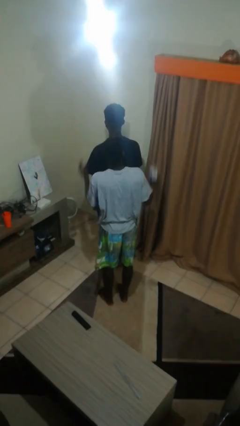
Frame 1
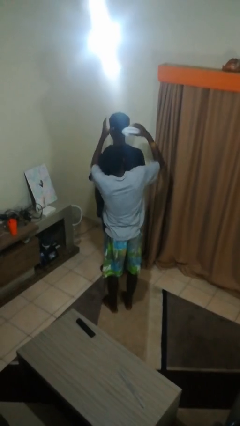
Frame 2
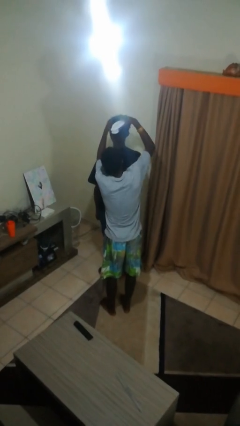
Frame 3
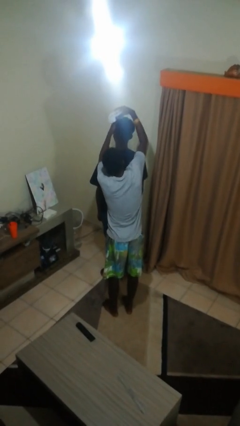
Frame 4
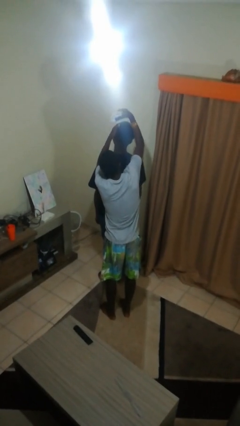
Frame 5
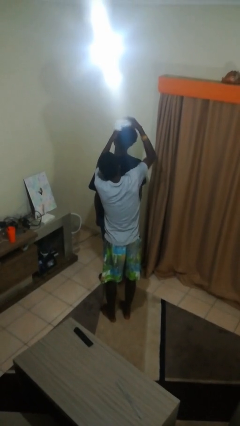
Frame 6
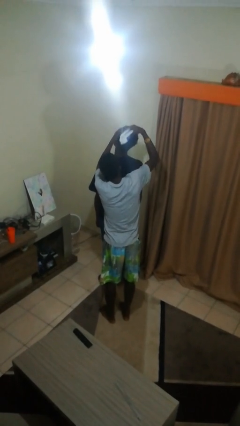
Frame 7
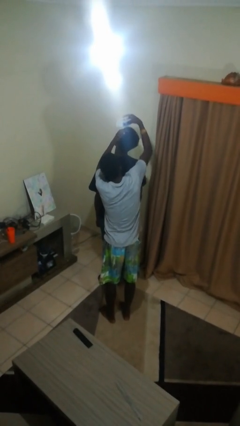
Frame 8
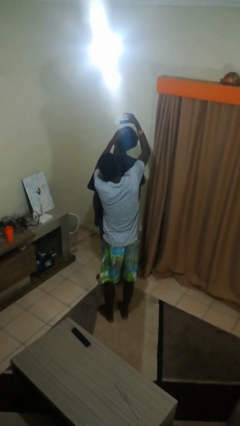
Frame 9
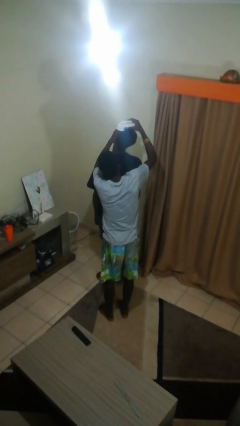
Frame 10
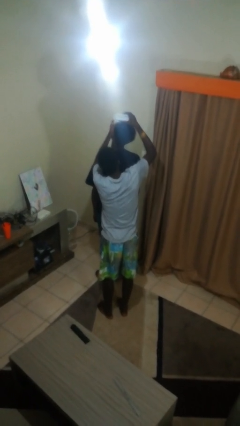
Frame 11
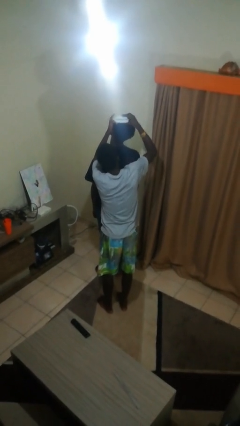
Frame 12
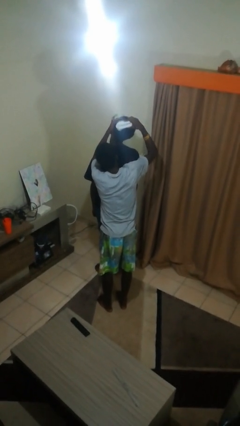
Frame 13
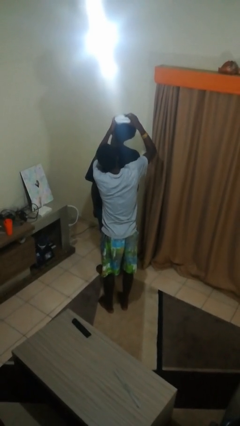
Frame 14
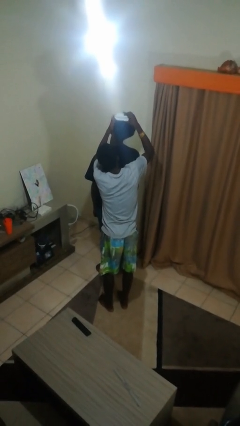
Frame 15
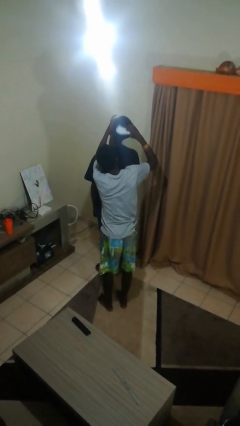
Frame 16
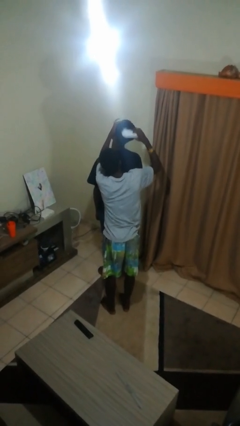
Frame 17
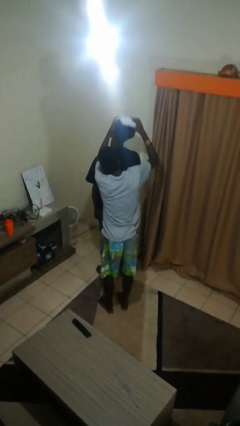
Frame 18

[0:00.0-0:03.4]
person brushes hair of person

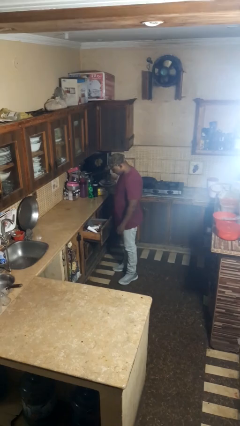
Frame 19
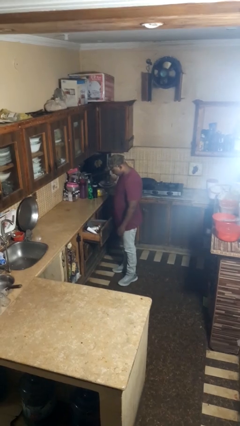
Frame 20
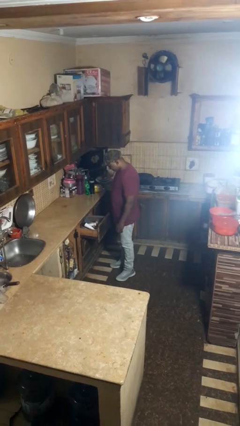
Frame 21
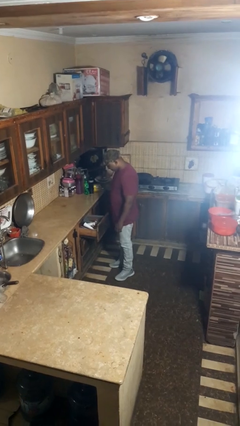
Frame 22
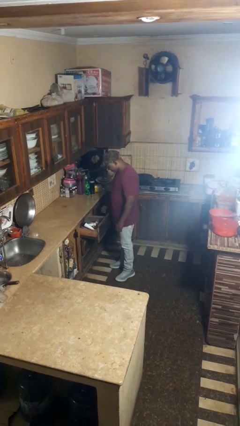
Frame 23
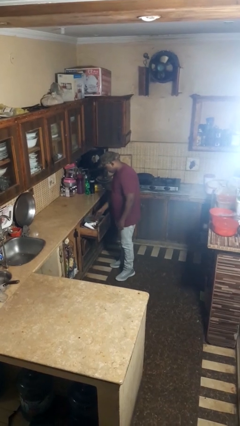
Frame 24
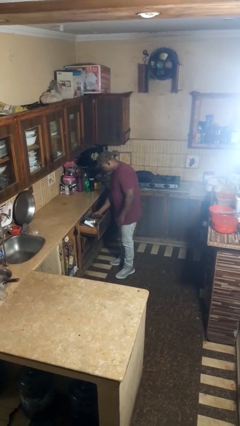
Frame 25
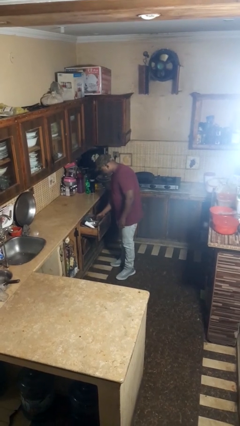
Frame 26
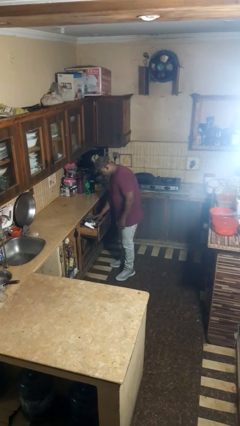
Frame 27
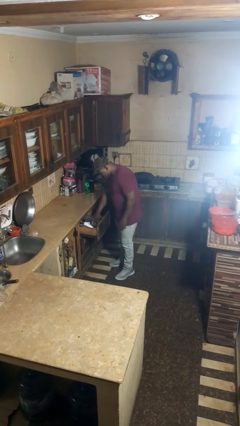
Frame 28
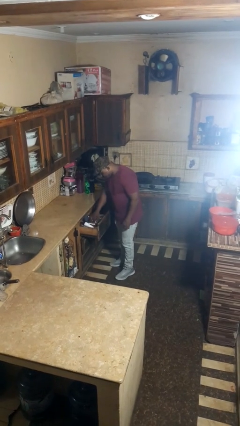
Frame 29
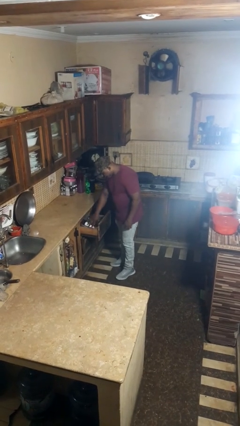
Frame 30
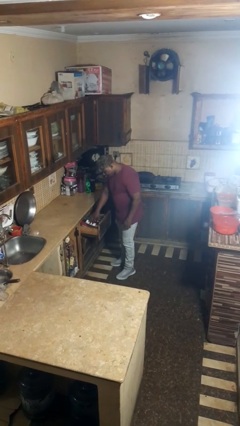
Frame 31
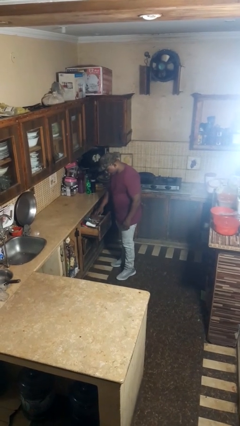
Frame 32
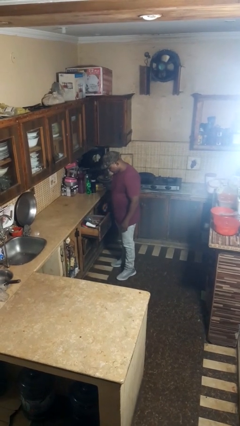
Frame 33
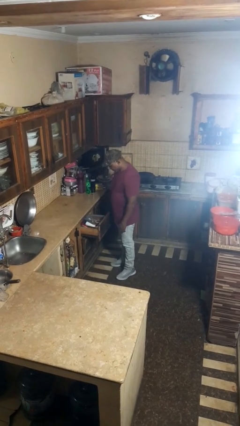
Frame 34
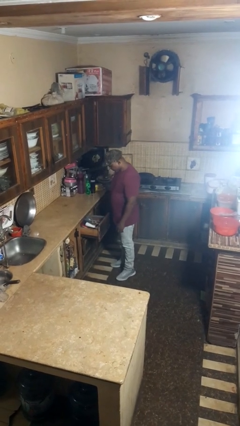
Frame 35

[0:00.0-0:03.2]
person searches in kitchen drawer

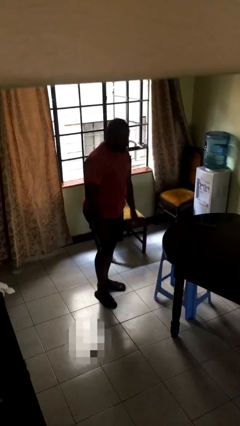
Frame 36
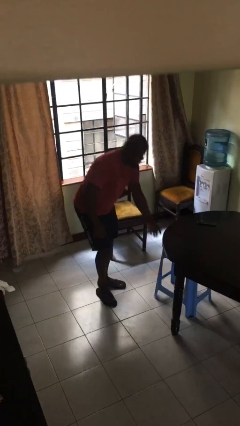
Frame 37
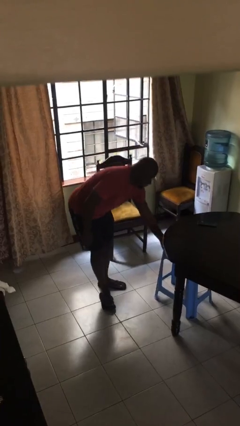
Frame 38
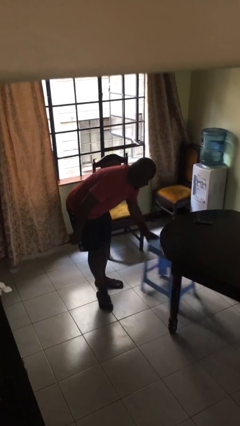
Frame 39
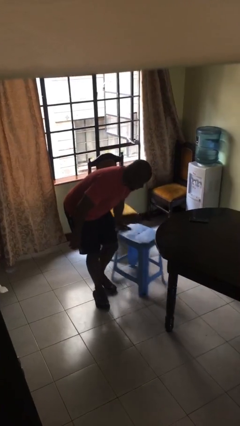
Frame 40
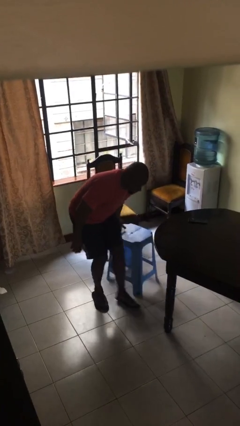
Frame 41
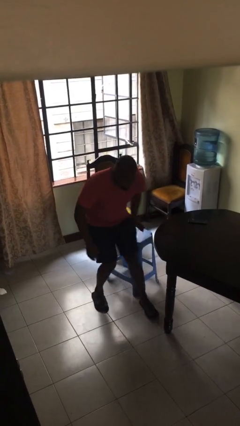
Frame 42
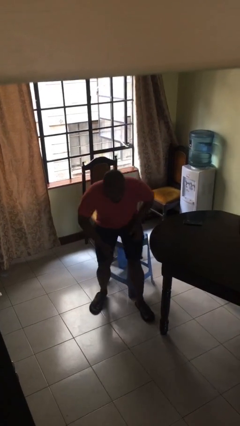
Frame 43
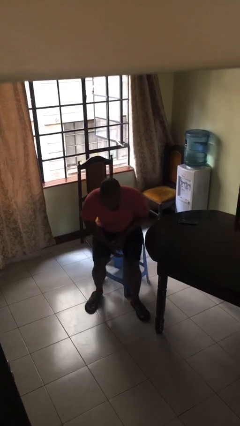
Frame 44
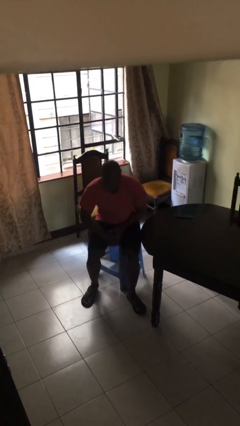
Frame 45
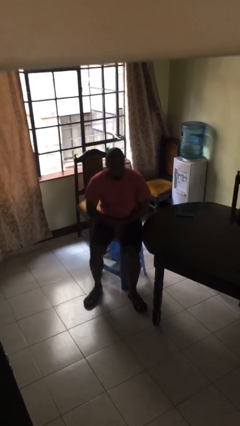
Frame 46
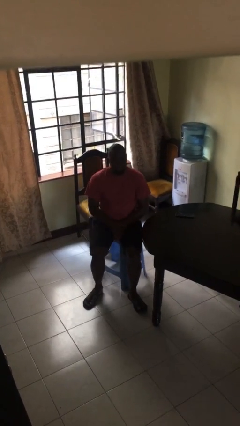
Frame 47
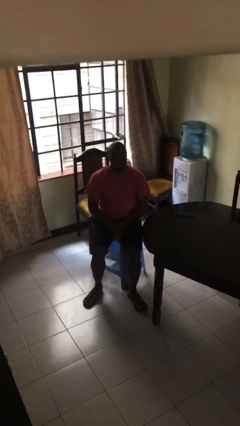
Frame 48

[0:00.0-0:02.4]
person sits down

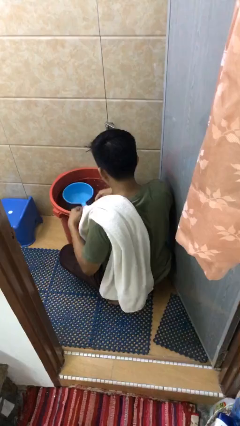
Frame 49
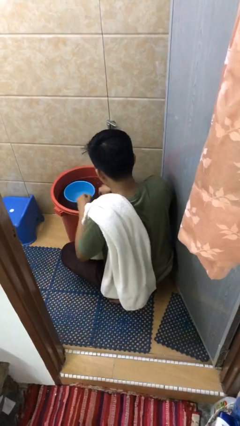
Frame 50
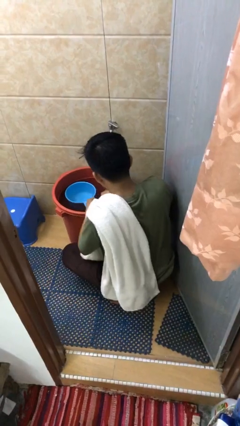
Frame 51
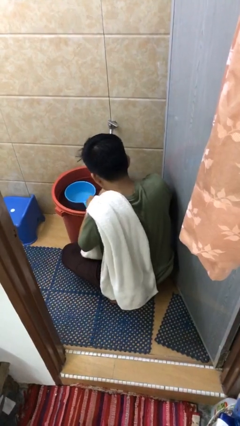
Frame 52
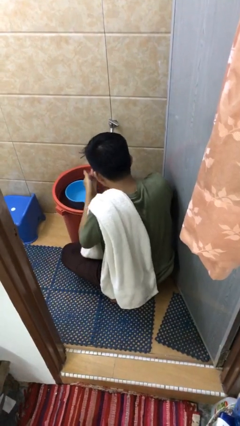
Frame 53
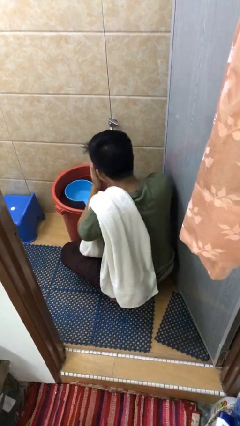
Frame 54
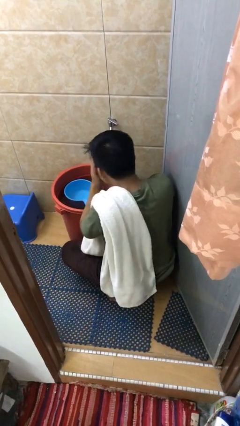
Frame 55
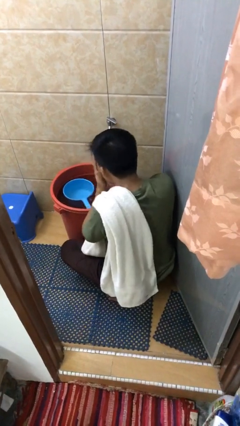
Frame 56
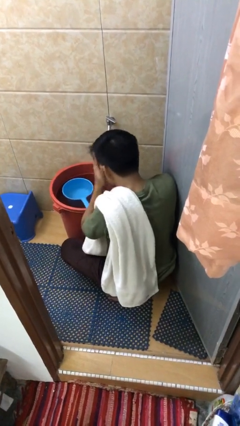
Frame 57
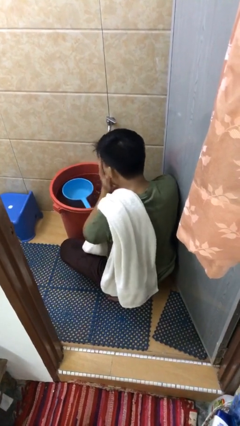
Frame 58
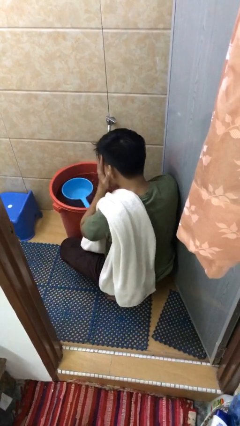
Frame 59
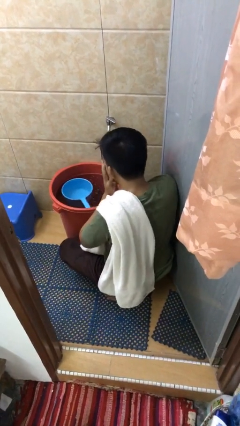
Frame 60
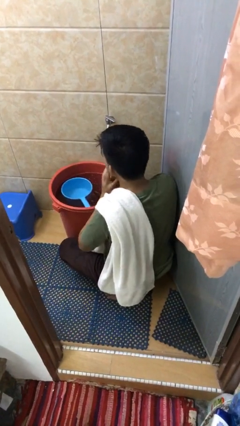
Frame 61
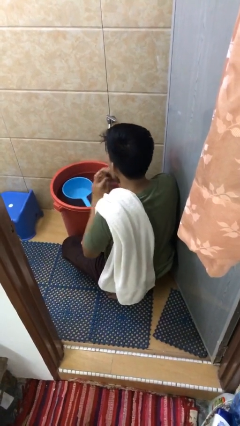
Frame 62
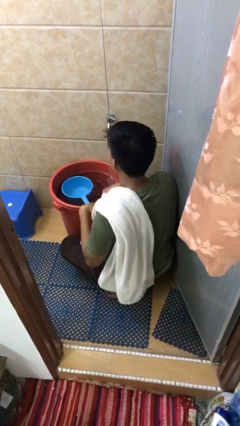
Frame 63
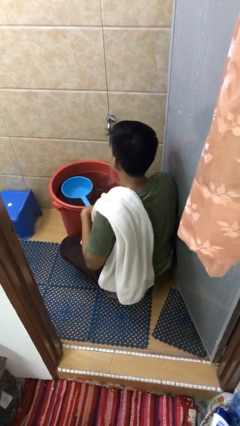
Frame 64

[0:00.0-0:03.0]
person washes face

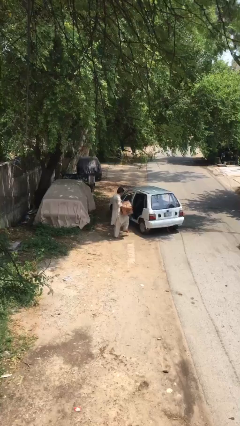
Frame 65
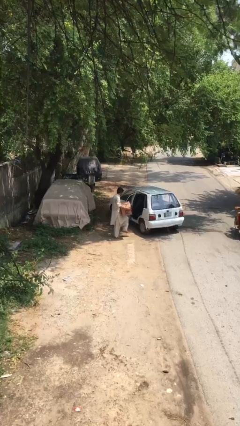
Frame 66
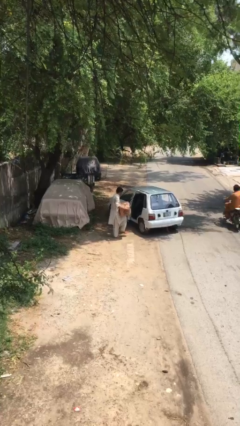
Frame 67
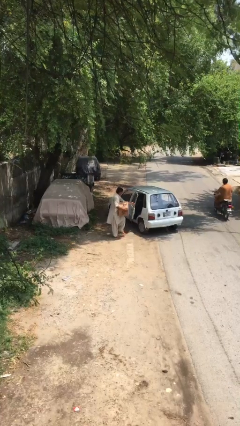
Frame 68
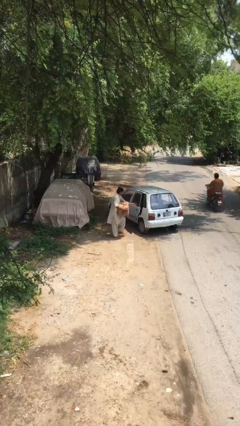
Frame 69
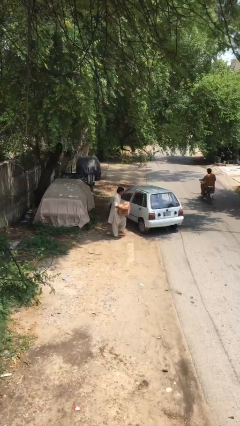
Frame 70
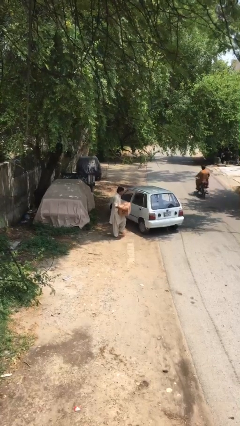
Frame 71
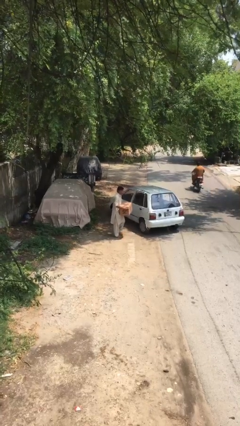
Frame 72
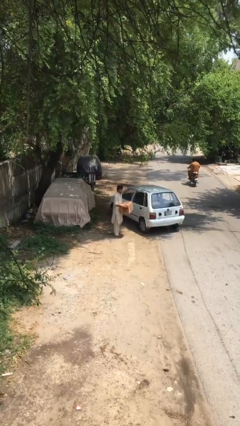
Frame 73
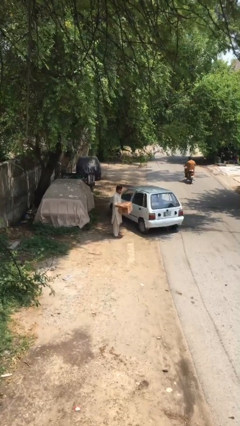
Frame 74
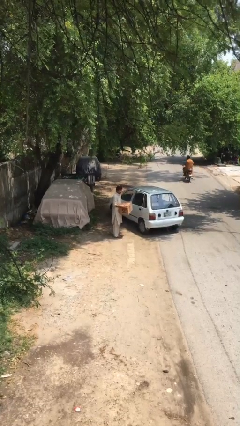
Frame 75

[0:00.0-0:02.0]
person closes car door

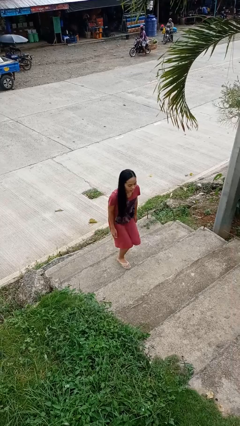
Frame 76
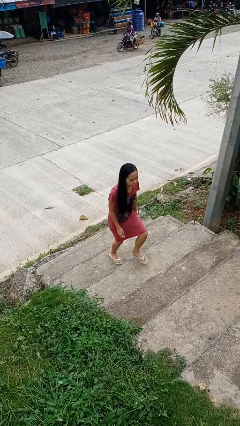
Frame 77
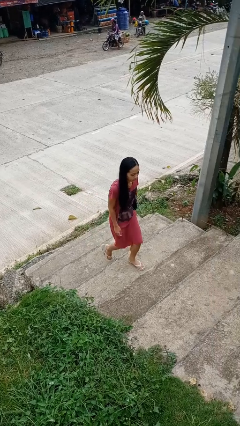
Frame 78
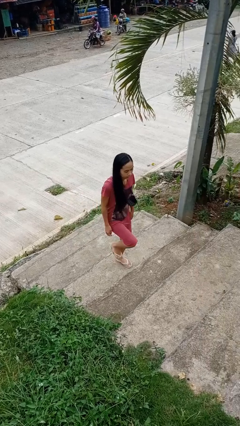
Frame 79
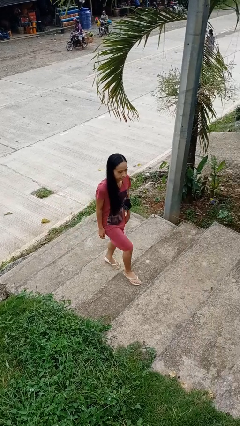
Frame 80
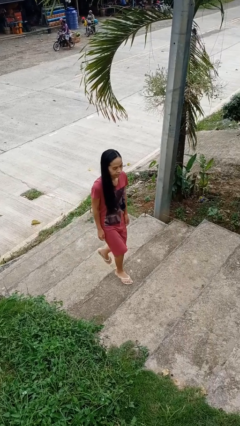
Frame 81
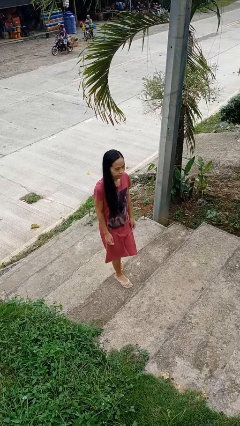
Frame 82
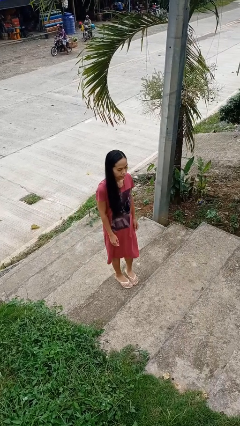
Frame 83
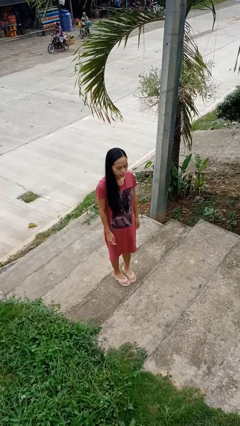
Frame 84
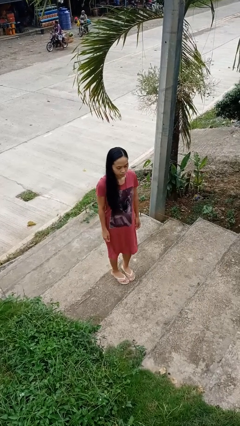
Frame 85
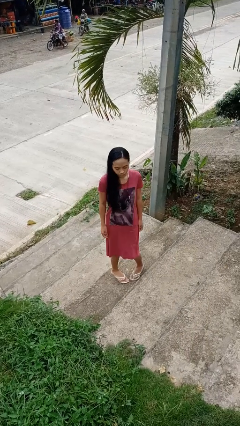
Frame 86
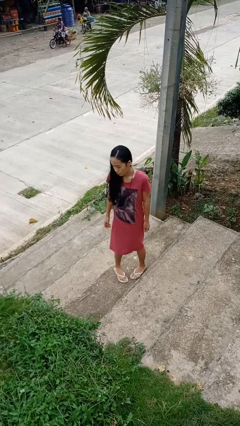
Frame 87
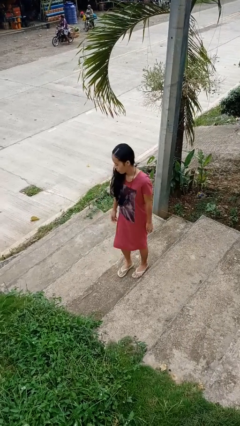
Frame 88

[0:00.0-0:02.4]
person climbs up stairs

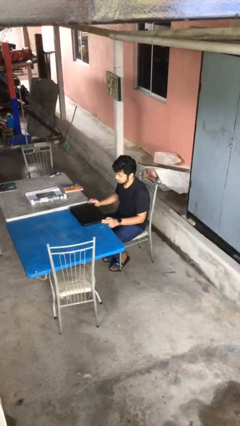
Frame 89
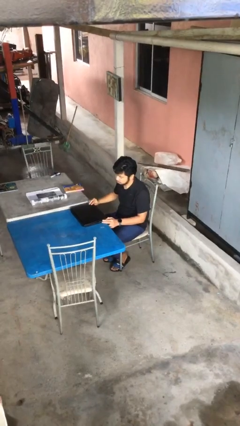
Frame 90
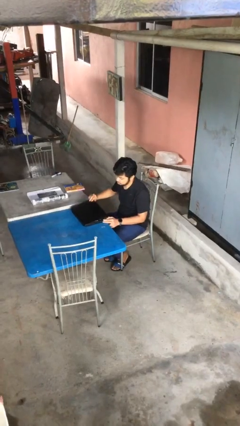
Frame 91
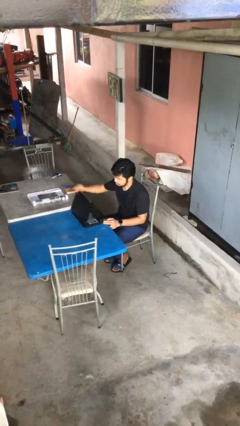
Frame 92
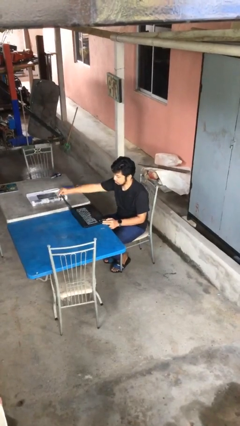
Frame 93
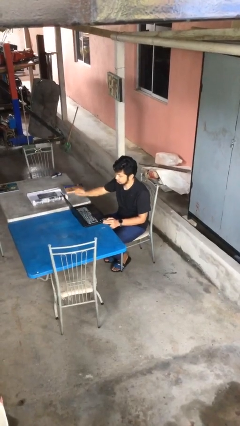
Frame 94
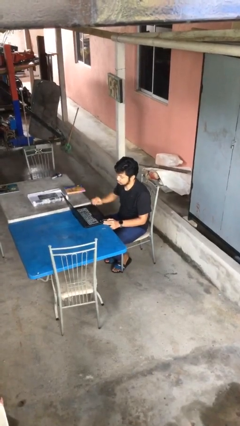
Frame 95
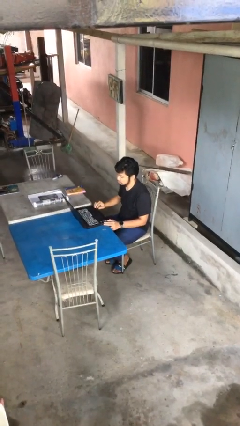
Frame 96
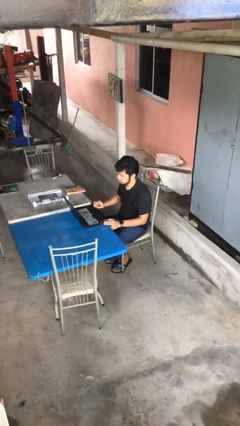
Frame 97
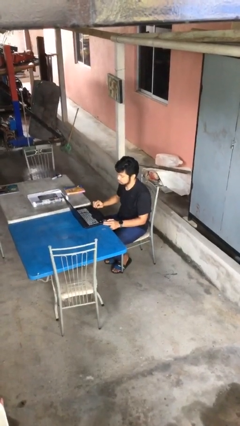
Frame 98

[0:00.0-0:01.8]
person opens laptop
